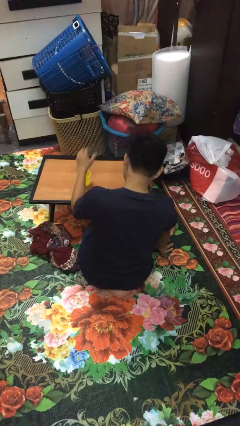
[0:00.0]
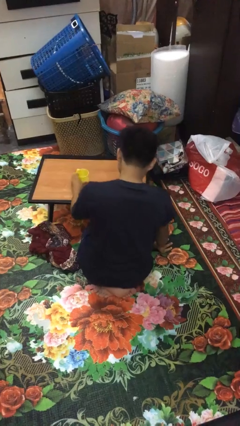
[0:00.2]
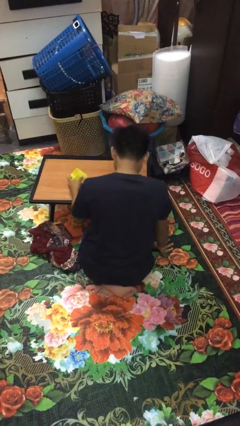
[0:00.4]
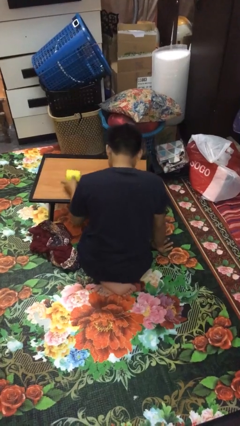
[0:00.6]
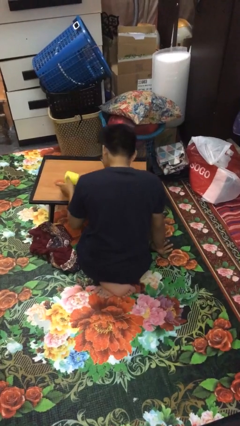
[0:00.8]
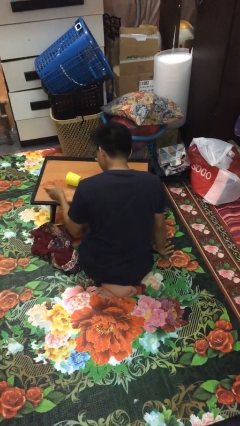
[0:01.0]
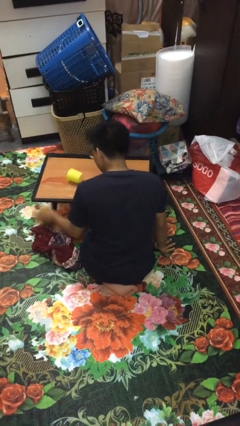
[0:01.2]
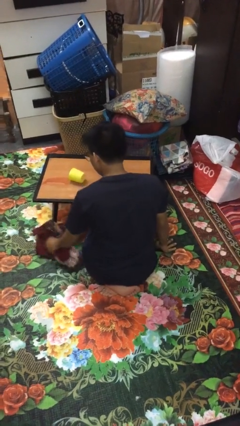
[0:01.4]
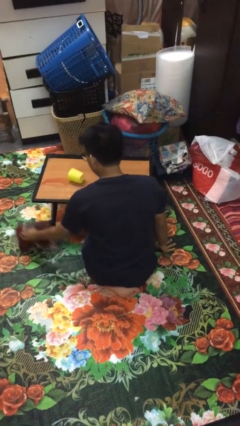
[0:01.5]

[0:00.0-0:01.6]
person spills on table

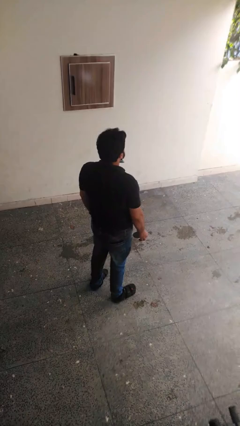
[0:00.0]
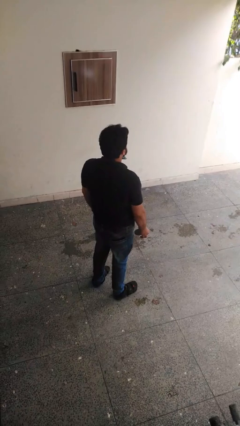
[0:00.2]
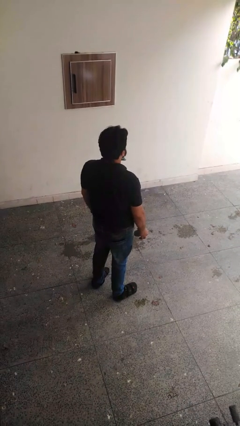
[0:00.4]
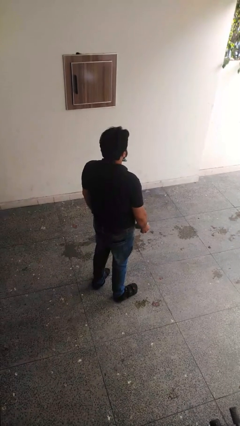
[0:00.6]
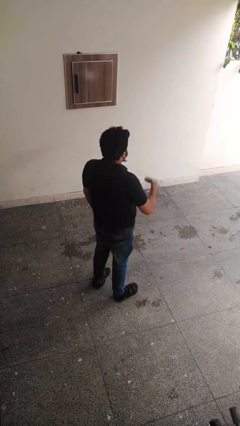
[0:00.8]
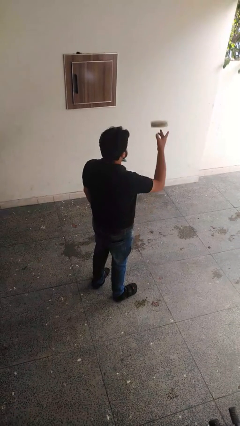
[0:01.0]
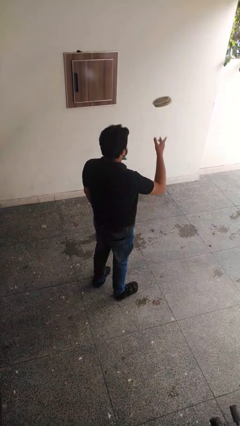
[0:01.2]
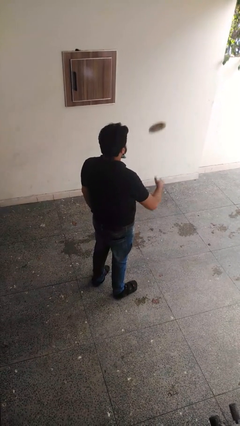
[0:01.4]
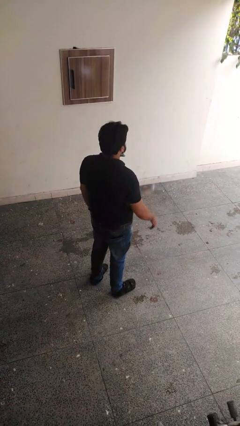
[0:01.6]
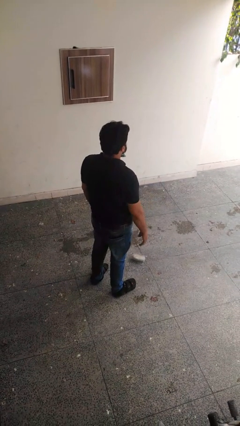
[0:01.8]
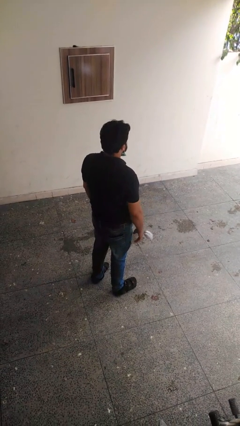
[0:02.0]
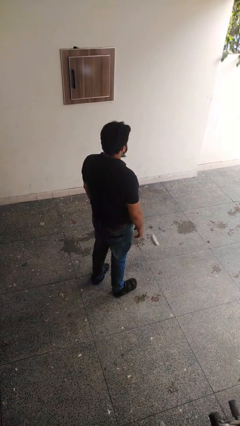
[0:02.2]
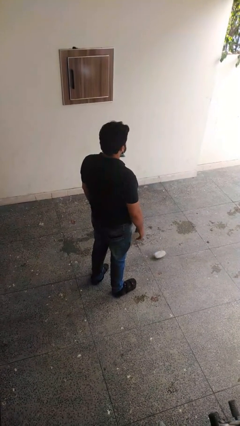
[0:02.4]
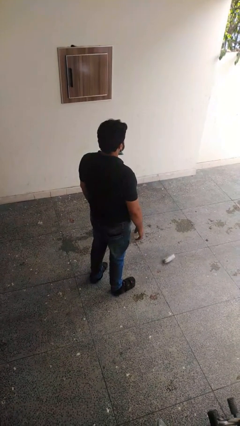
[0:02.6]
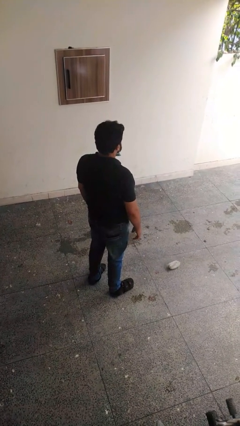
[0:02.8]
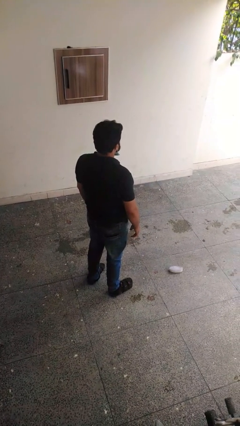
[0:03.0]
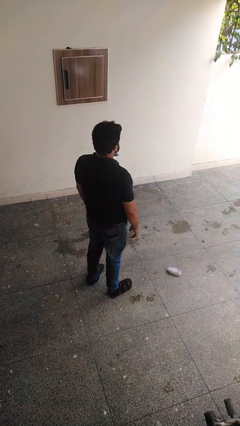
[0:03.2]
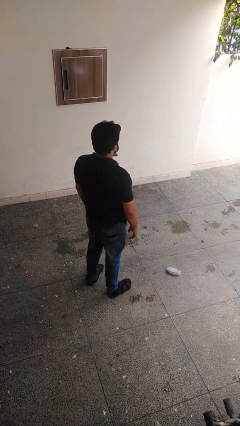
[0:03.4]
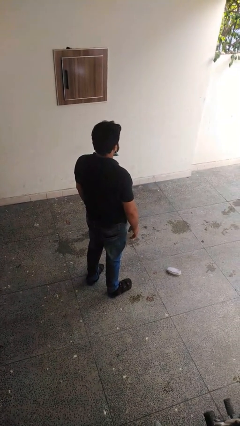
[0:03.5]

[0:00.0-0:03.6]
person throws object into air

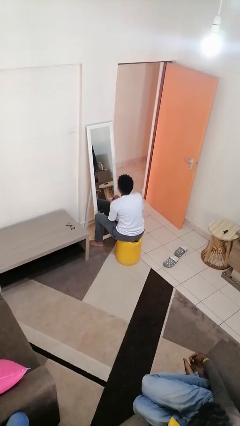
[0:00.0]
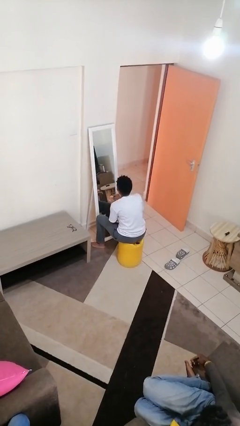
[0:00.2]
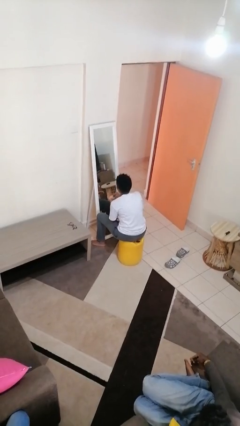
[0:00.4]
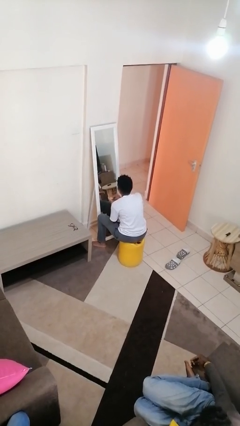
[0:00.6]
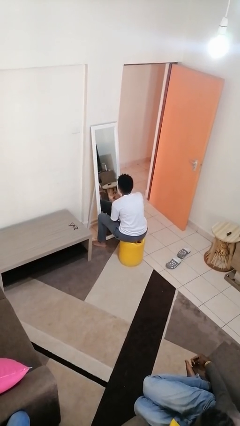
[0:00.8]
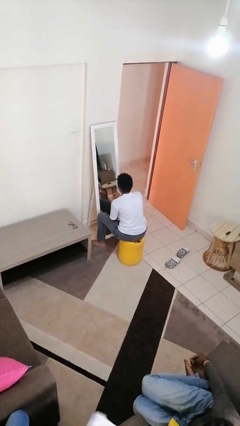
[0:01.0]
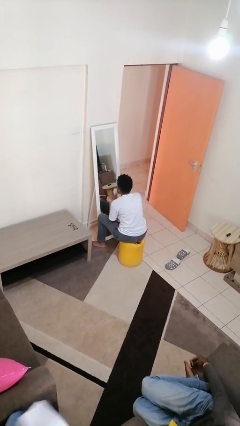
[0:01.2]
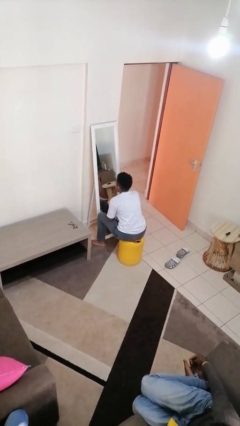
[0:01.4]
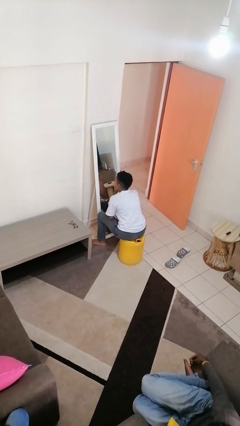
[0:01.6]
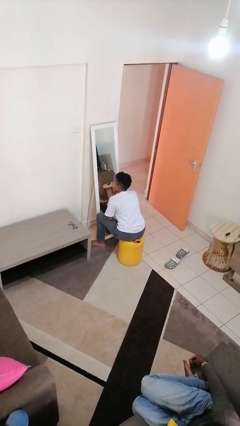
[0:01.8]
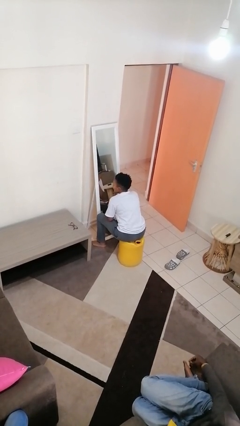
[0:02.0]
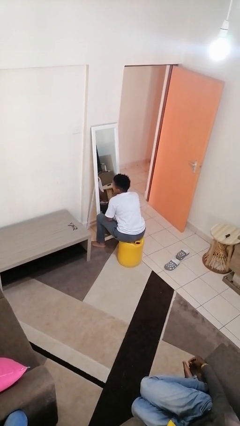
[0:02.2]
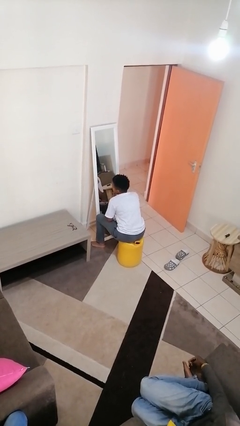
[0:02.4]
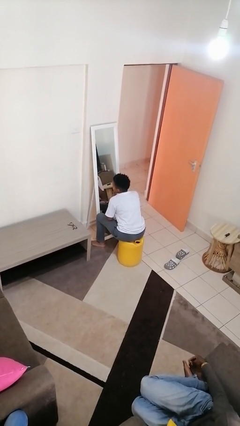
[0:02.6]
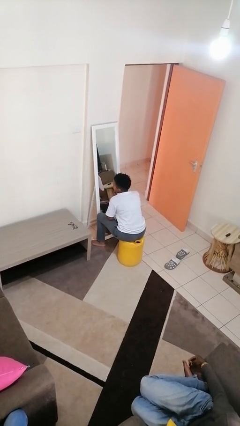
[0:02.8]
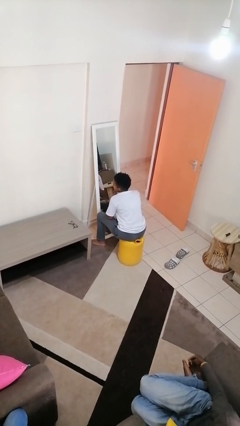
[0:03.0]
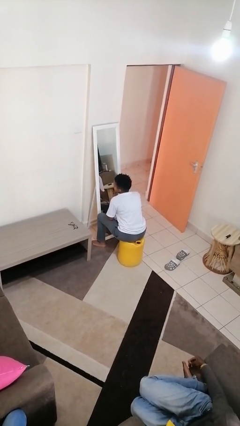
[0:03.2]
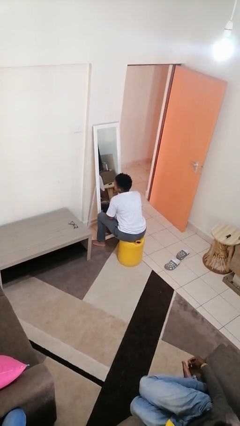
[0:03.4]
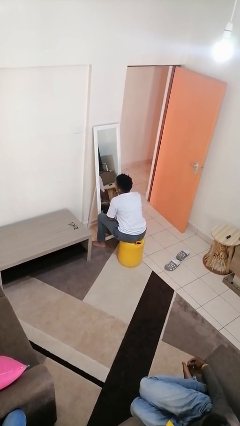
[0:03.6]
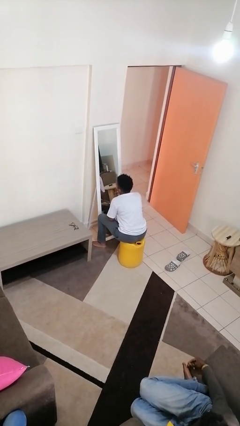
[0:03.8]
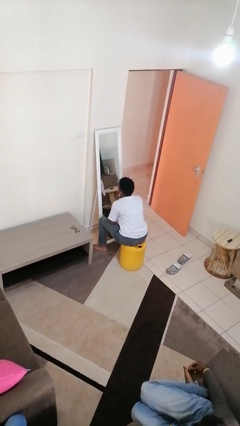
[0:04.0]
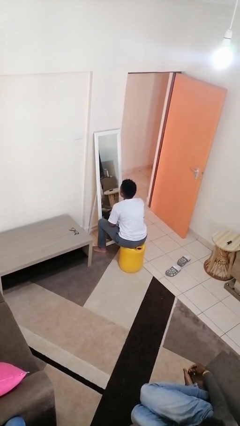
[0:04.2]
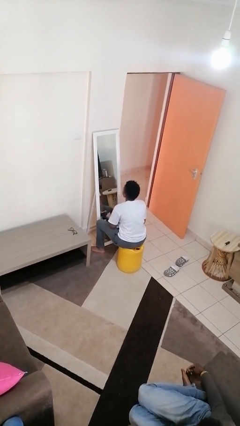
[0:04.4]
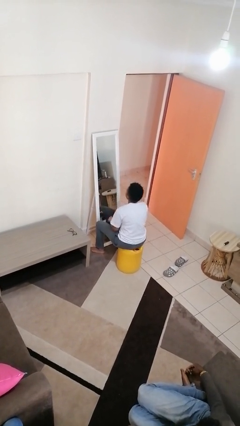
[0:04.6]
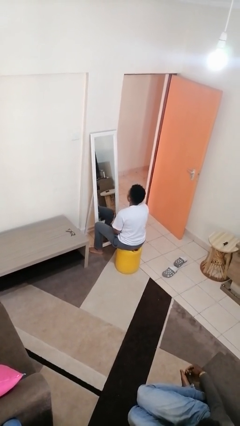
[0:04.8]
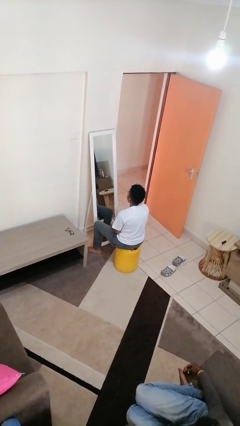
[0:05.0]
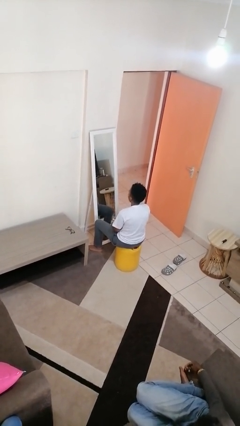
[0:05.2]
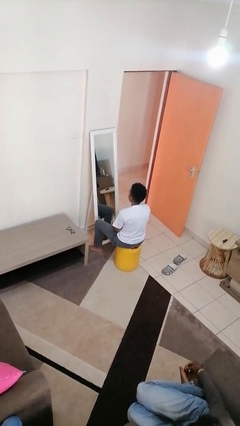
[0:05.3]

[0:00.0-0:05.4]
person applies foundation makeup

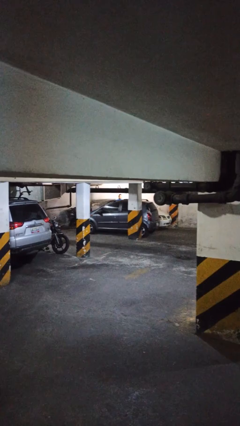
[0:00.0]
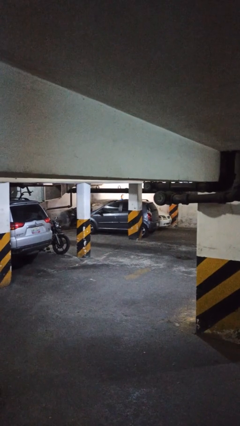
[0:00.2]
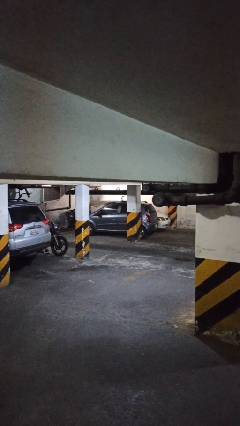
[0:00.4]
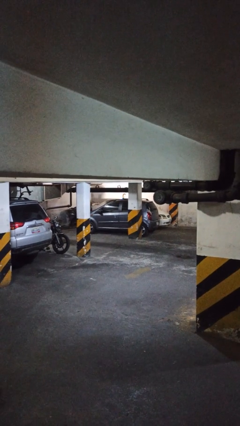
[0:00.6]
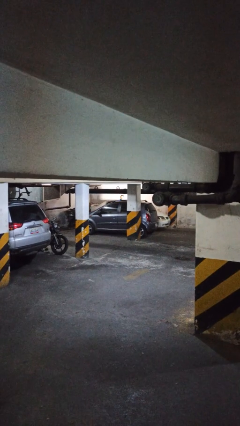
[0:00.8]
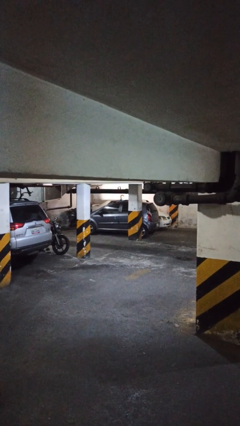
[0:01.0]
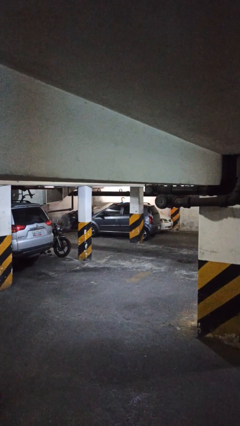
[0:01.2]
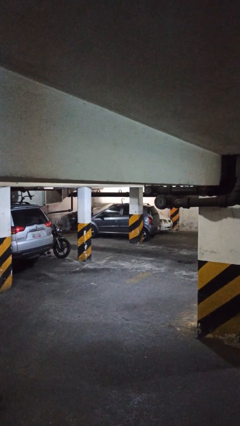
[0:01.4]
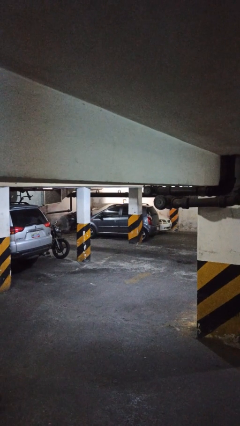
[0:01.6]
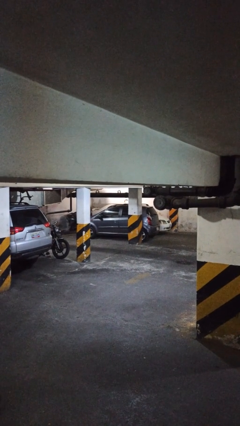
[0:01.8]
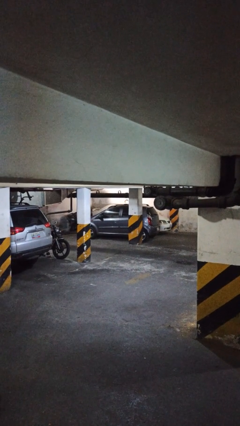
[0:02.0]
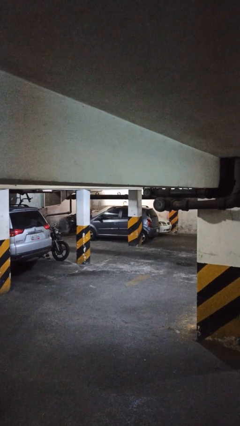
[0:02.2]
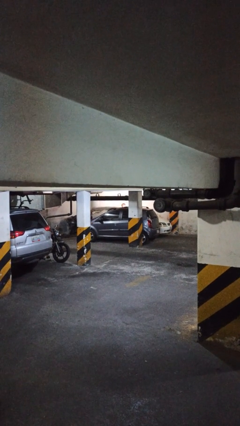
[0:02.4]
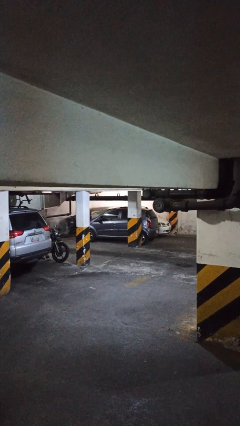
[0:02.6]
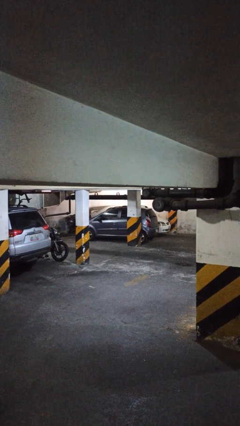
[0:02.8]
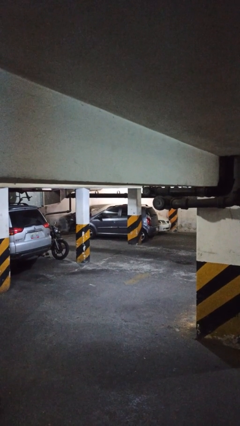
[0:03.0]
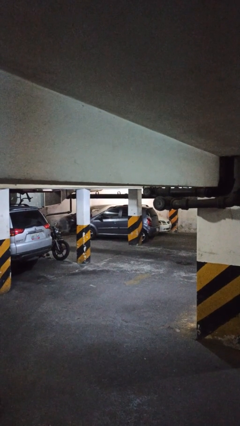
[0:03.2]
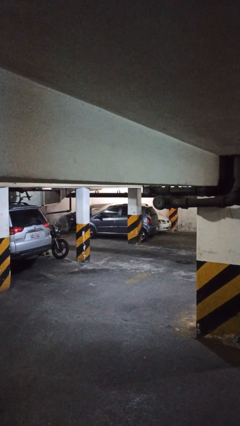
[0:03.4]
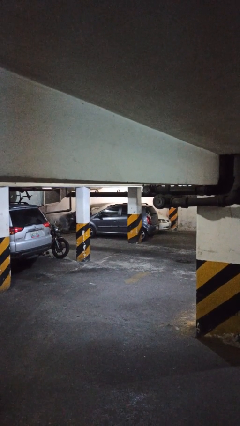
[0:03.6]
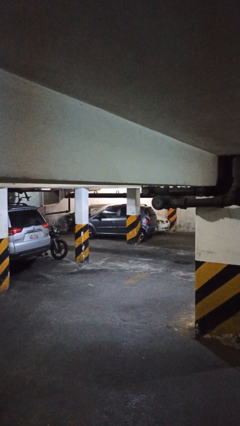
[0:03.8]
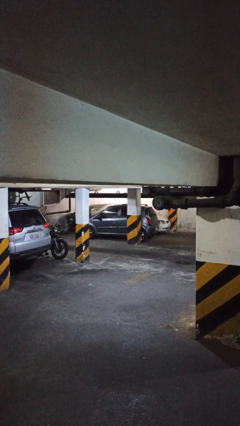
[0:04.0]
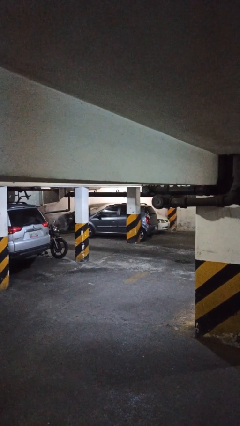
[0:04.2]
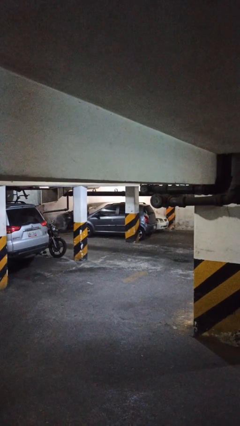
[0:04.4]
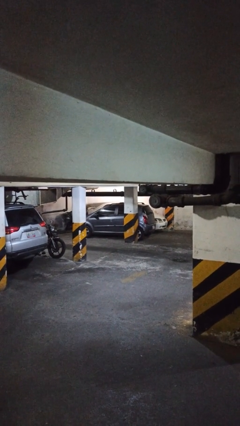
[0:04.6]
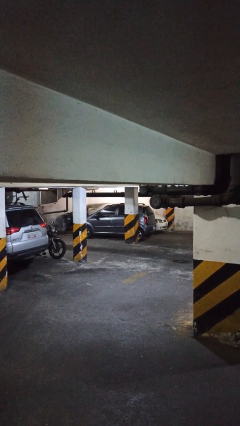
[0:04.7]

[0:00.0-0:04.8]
car picks up person

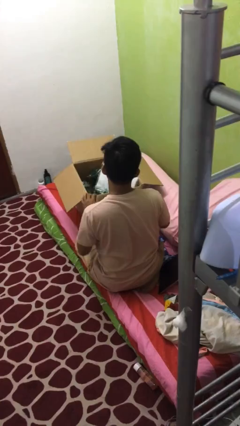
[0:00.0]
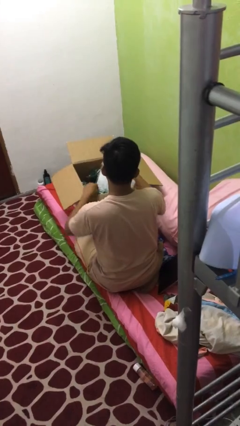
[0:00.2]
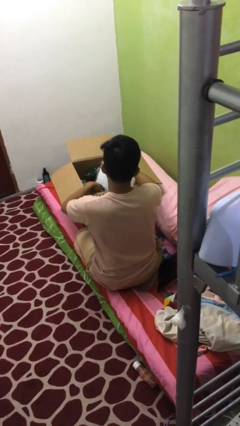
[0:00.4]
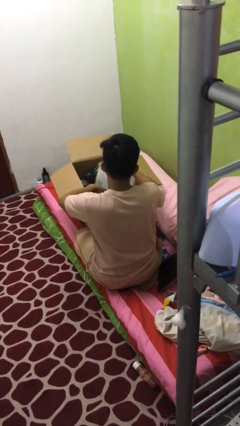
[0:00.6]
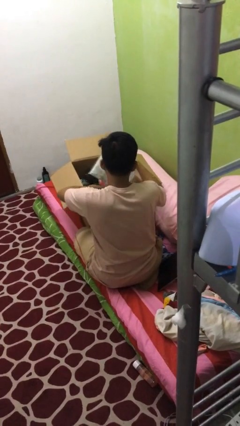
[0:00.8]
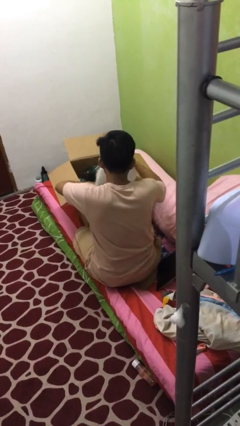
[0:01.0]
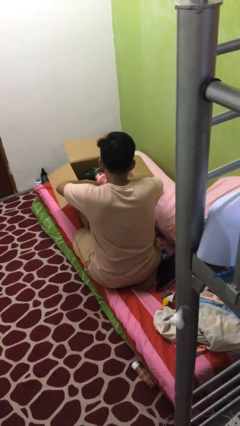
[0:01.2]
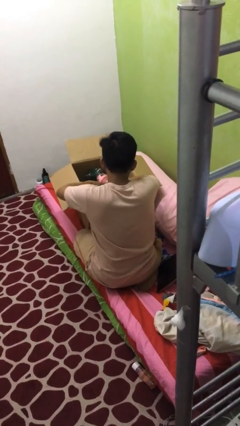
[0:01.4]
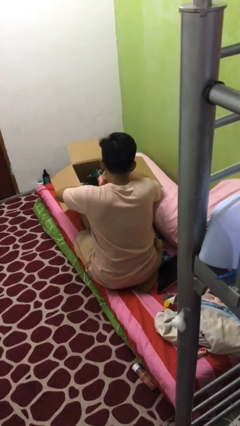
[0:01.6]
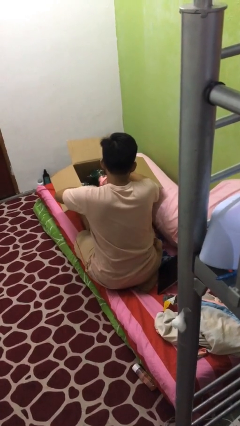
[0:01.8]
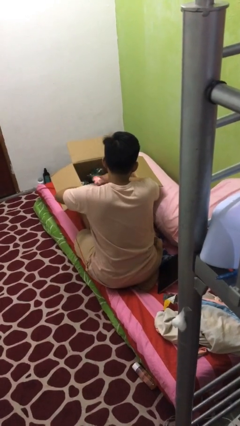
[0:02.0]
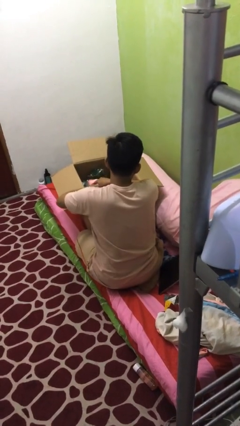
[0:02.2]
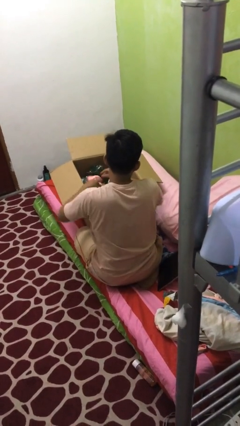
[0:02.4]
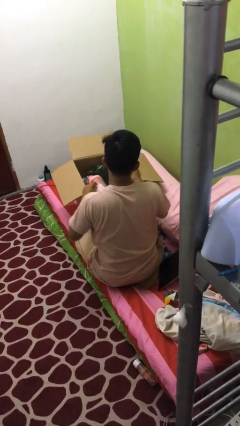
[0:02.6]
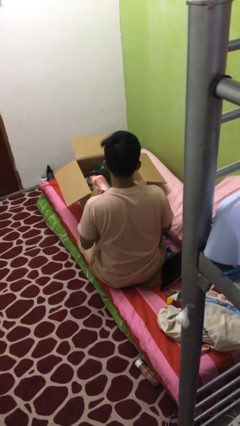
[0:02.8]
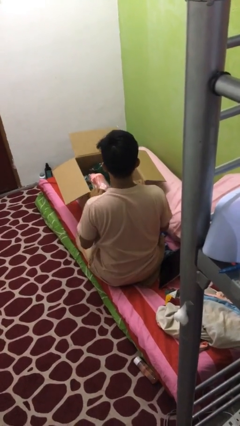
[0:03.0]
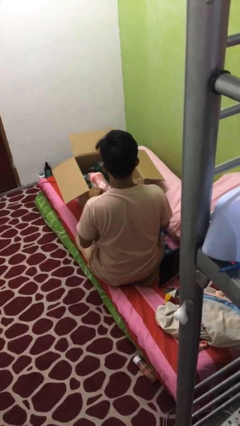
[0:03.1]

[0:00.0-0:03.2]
person searches in box
